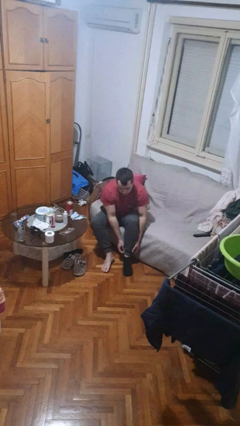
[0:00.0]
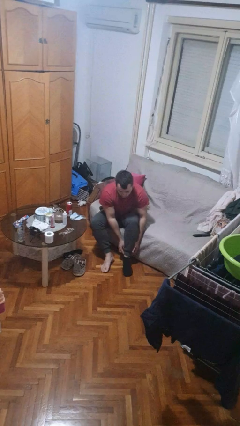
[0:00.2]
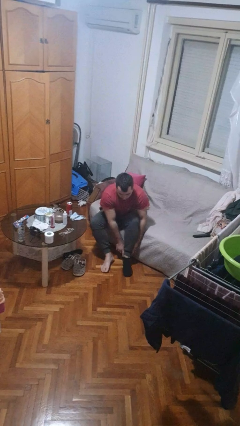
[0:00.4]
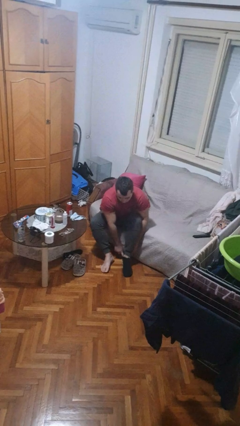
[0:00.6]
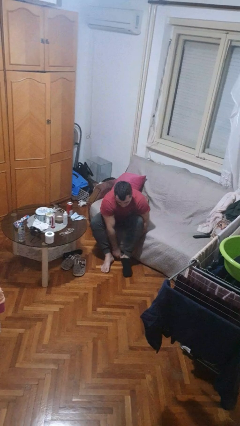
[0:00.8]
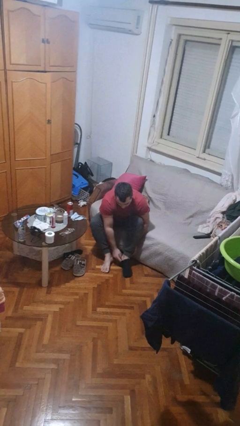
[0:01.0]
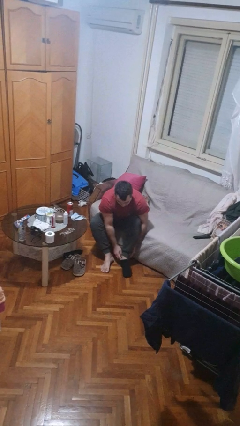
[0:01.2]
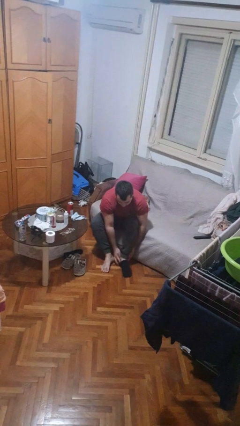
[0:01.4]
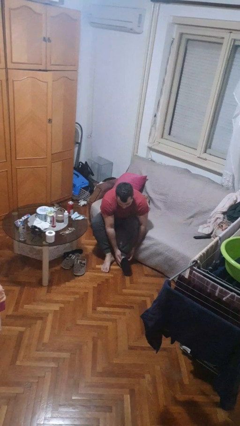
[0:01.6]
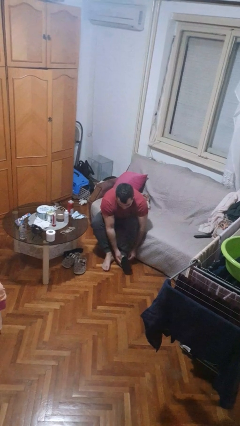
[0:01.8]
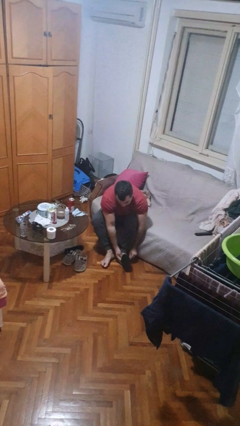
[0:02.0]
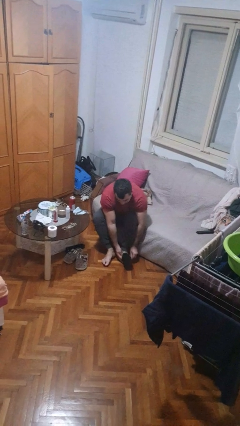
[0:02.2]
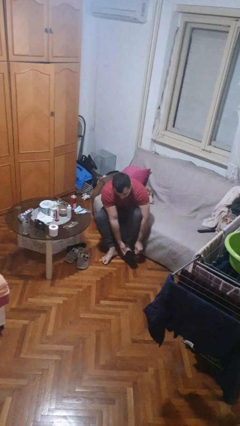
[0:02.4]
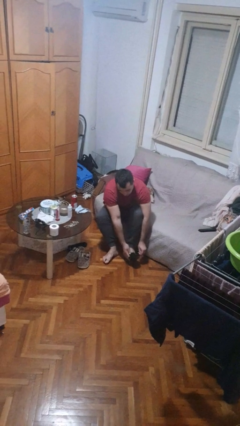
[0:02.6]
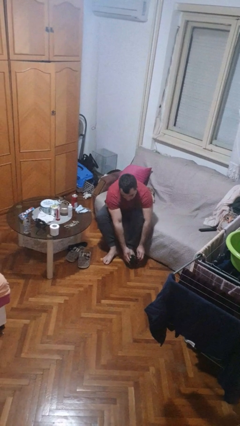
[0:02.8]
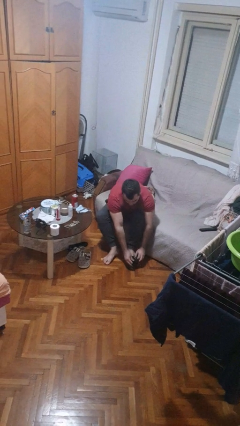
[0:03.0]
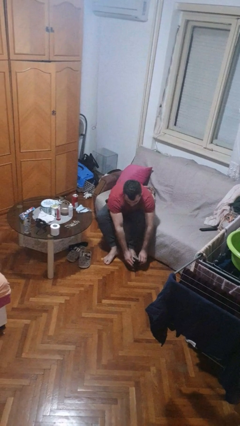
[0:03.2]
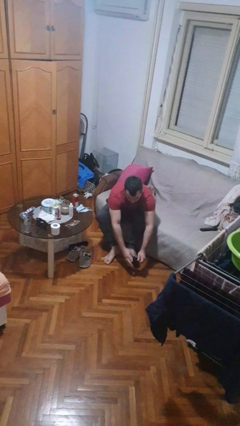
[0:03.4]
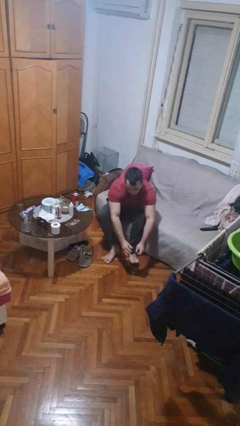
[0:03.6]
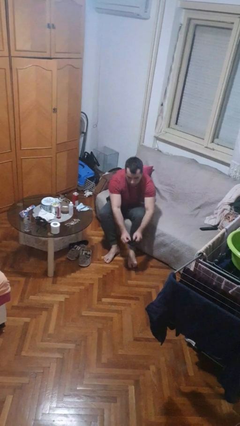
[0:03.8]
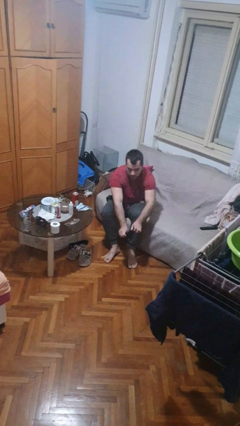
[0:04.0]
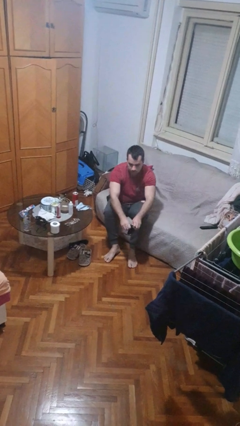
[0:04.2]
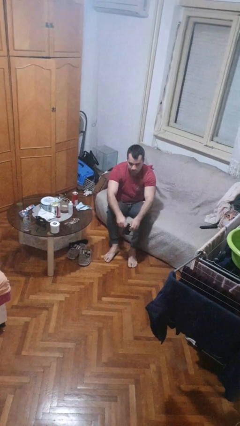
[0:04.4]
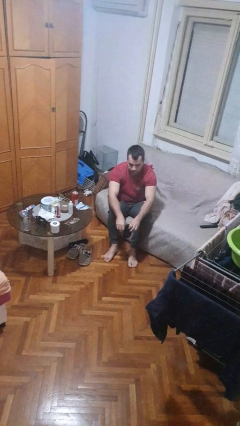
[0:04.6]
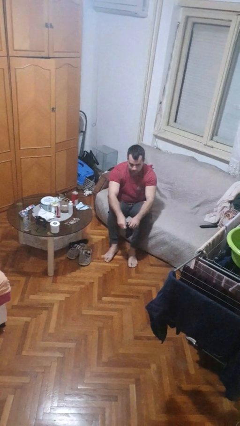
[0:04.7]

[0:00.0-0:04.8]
person takes off socks

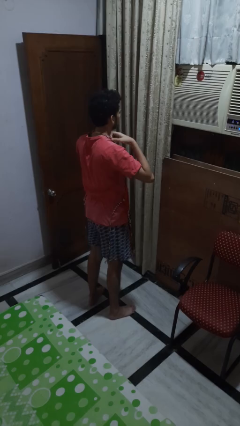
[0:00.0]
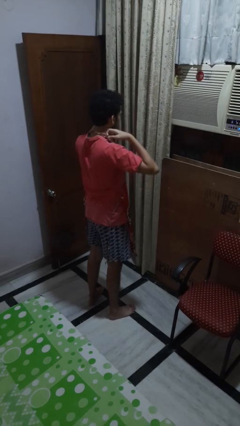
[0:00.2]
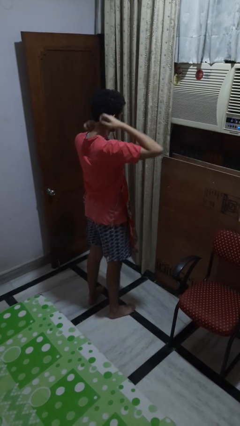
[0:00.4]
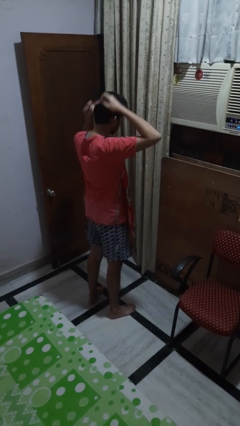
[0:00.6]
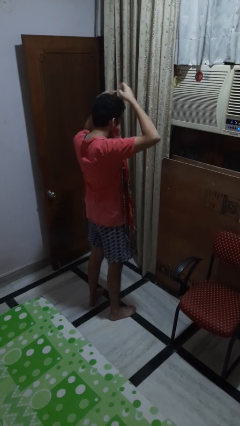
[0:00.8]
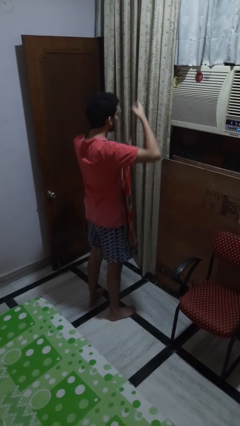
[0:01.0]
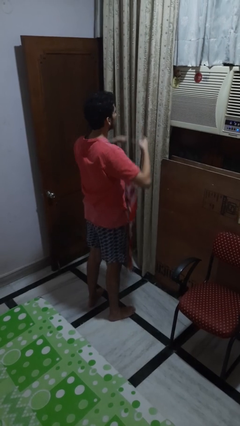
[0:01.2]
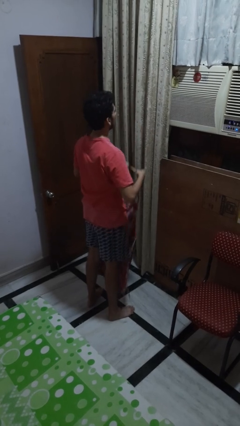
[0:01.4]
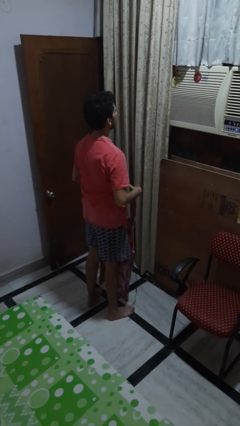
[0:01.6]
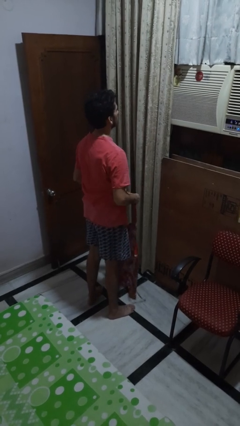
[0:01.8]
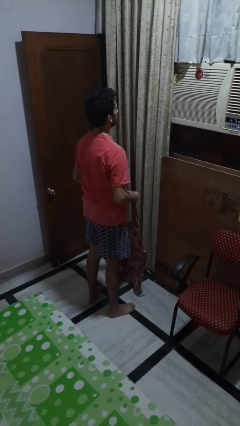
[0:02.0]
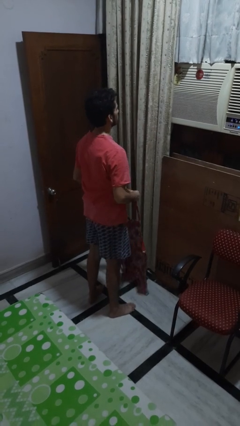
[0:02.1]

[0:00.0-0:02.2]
person takes off apron

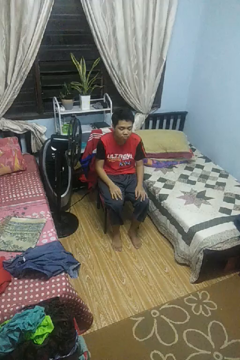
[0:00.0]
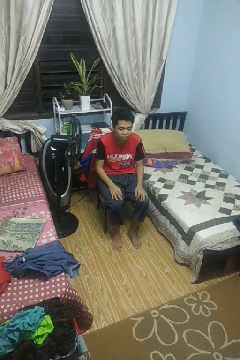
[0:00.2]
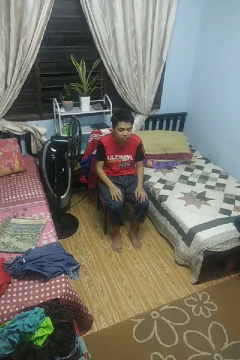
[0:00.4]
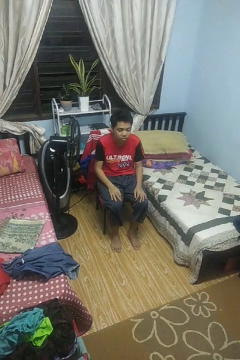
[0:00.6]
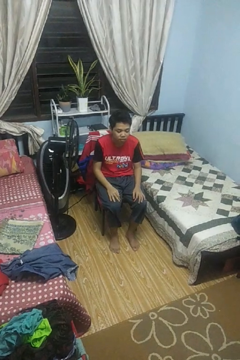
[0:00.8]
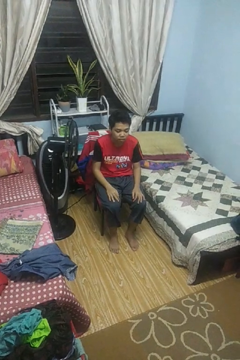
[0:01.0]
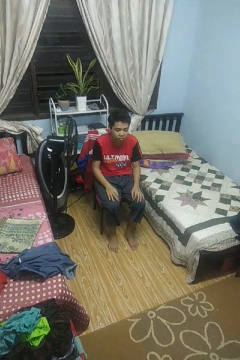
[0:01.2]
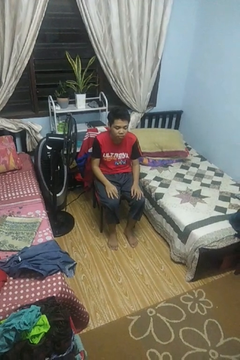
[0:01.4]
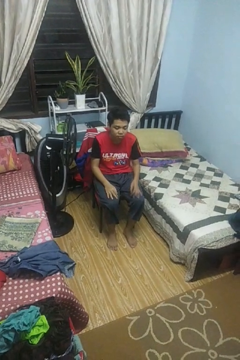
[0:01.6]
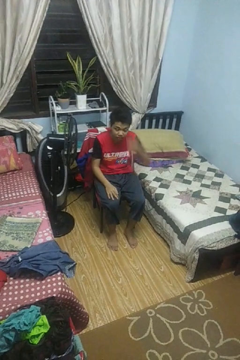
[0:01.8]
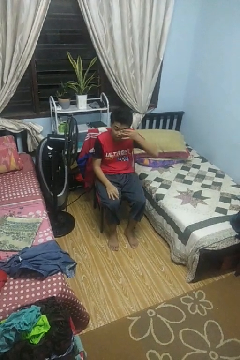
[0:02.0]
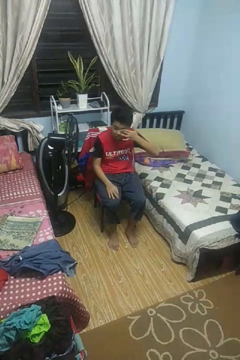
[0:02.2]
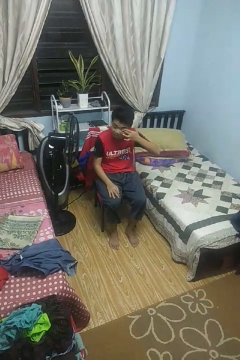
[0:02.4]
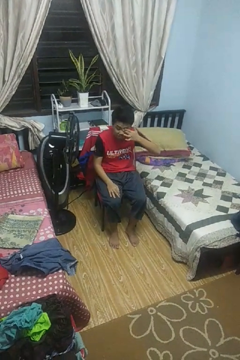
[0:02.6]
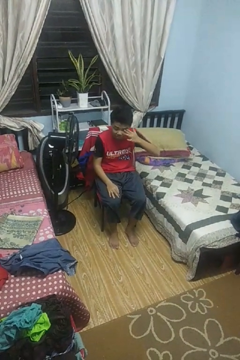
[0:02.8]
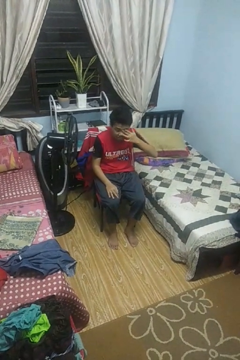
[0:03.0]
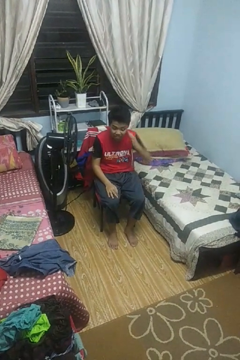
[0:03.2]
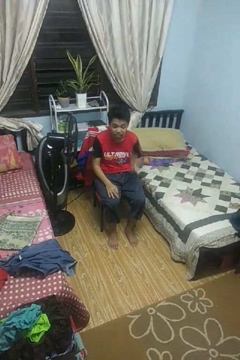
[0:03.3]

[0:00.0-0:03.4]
person rubs eyes

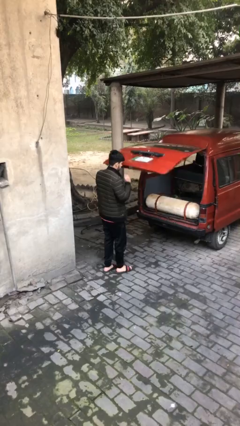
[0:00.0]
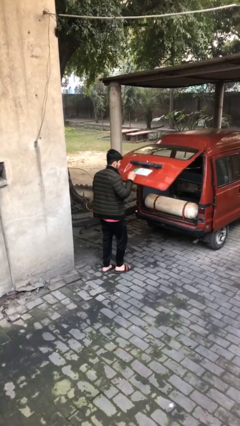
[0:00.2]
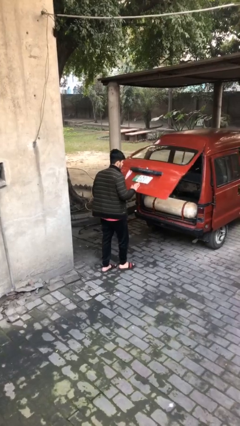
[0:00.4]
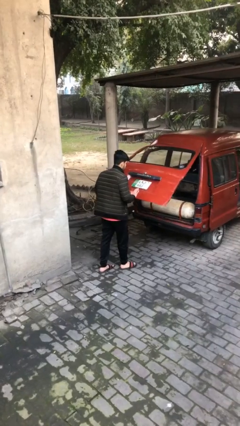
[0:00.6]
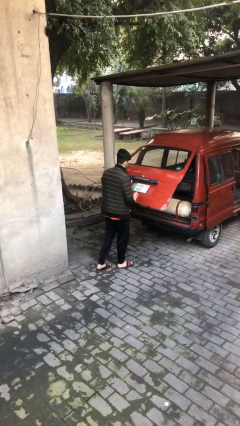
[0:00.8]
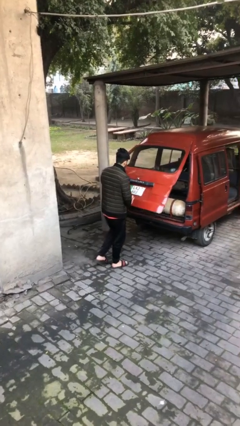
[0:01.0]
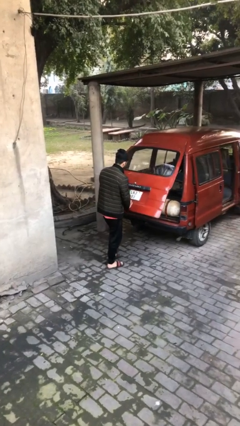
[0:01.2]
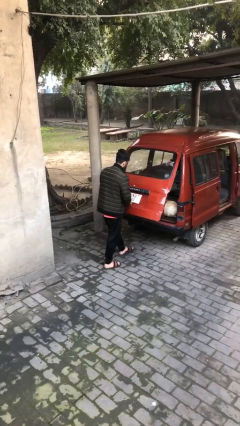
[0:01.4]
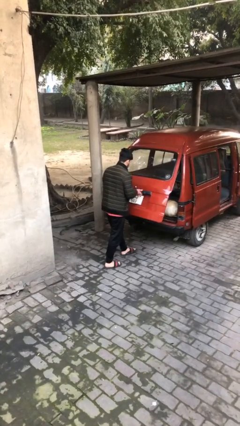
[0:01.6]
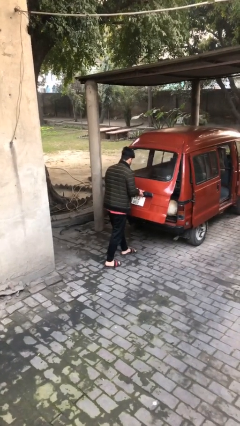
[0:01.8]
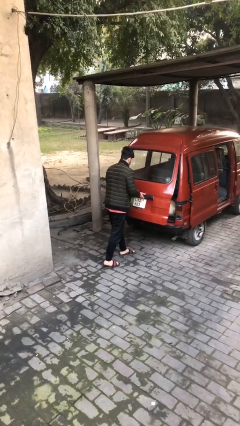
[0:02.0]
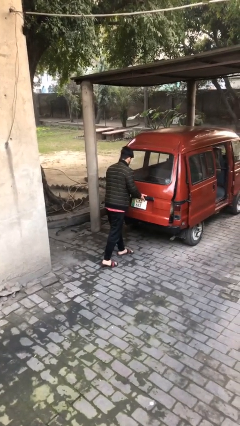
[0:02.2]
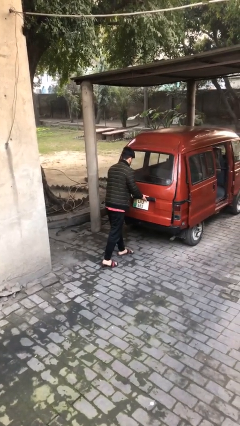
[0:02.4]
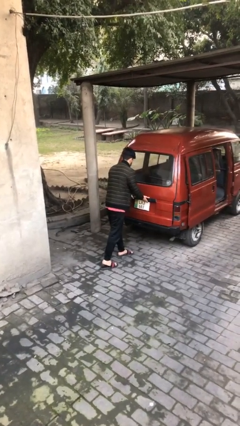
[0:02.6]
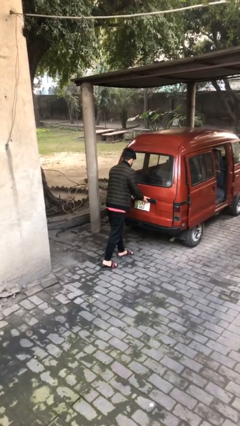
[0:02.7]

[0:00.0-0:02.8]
person closes car trunk

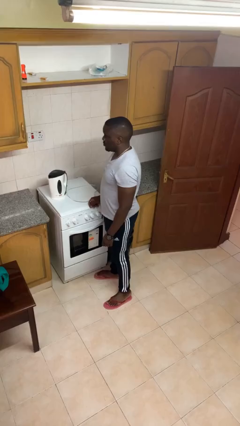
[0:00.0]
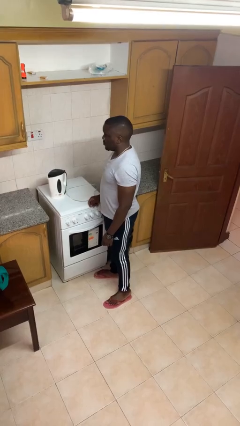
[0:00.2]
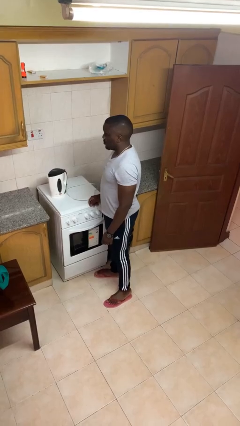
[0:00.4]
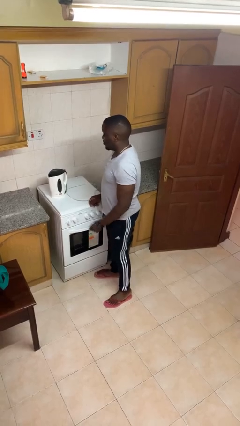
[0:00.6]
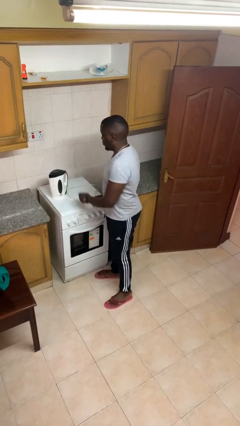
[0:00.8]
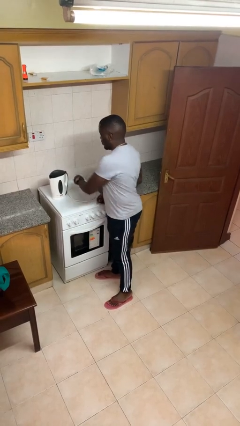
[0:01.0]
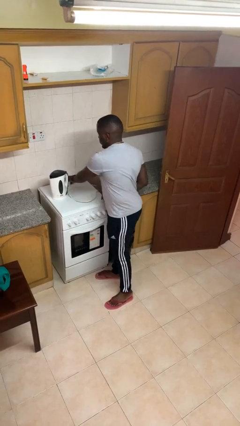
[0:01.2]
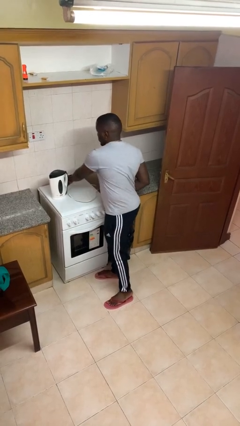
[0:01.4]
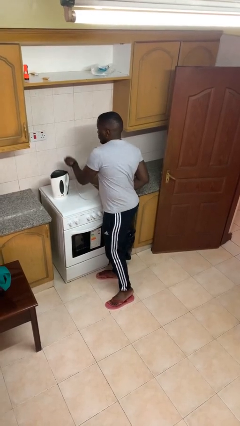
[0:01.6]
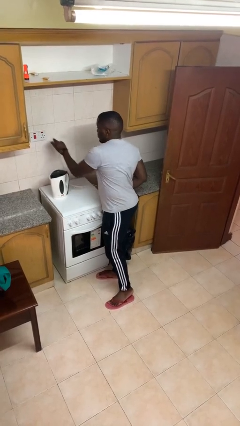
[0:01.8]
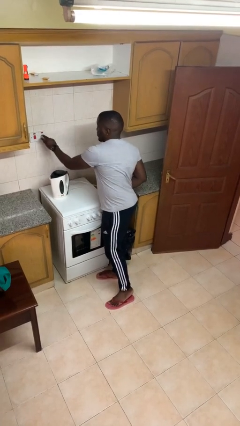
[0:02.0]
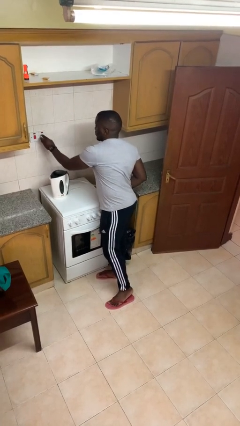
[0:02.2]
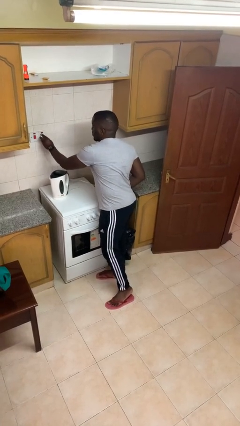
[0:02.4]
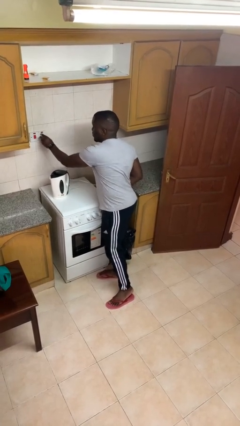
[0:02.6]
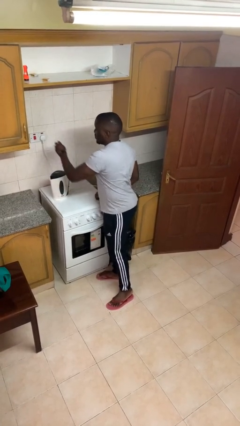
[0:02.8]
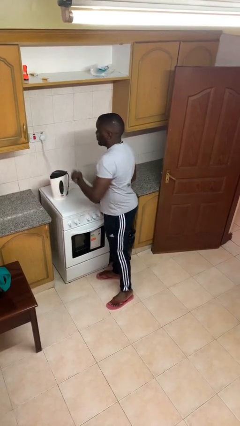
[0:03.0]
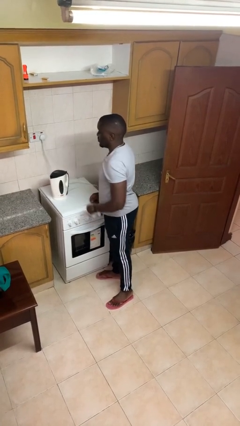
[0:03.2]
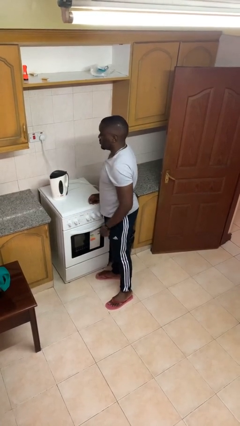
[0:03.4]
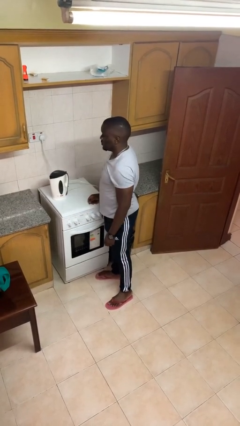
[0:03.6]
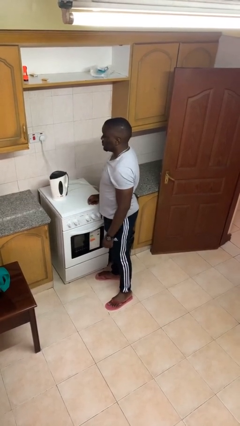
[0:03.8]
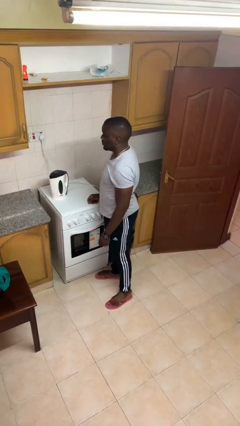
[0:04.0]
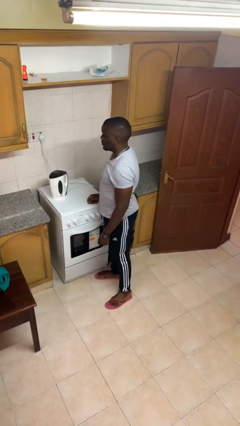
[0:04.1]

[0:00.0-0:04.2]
person plugs into electrical socket

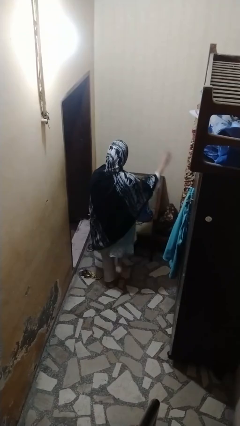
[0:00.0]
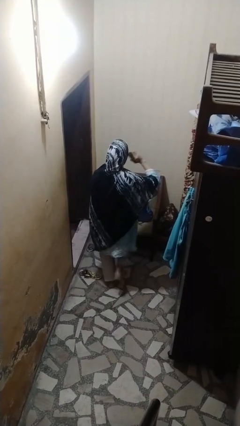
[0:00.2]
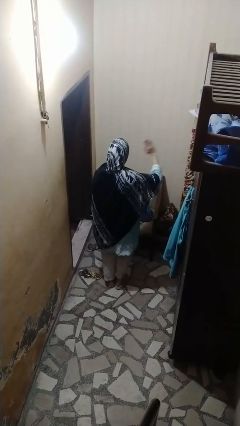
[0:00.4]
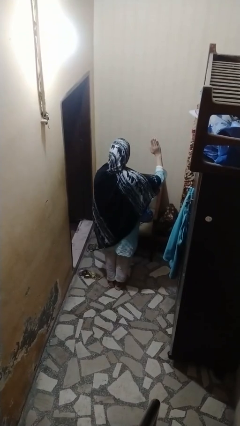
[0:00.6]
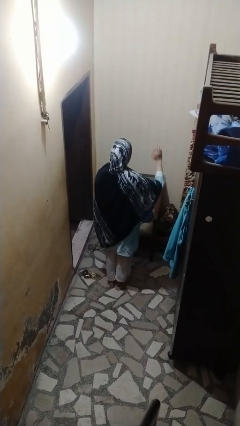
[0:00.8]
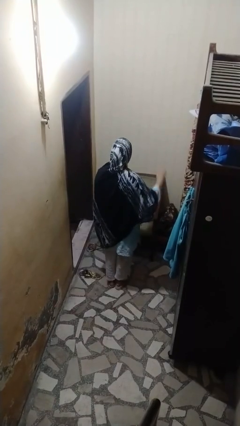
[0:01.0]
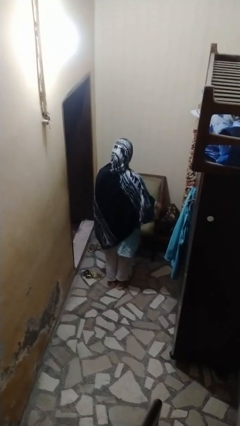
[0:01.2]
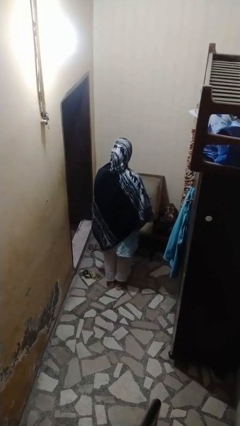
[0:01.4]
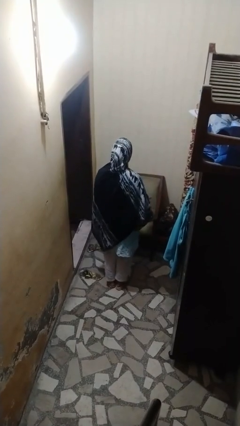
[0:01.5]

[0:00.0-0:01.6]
person salutes
